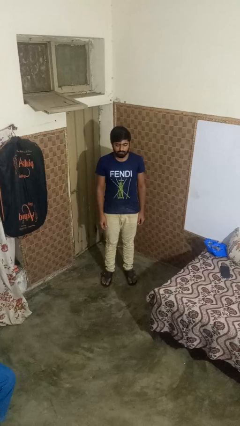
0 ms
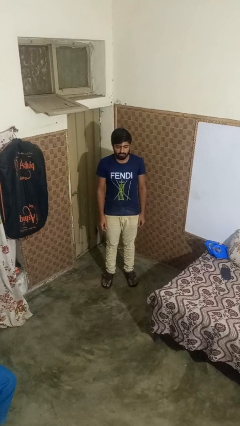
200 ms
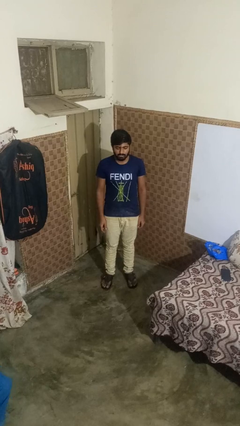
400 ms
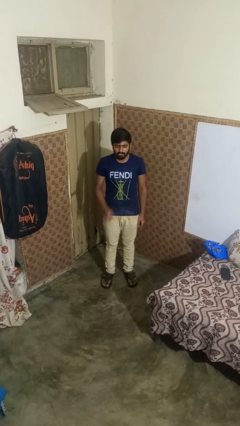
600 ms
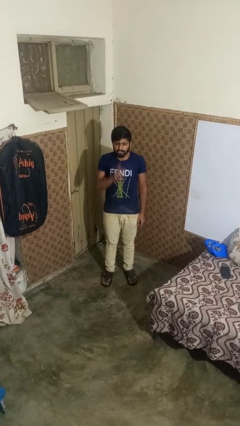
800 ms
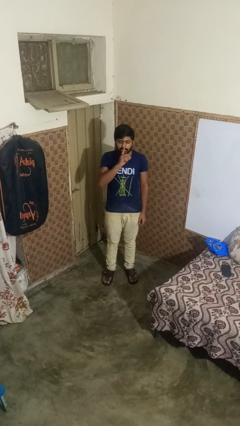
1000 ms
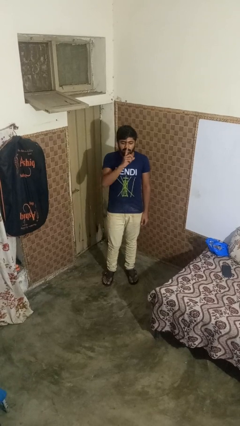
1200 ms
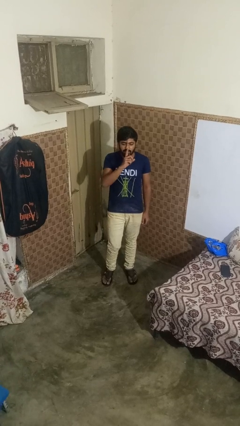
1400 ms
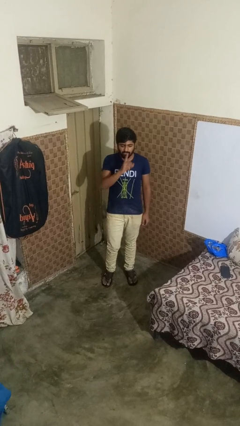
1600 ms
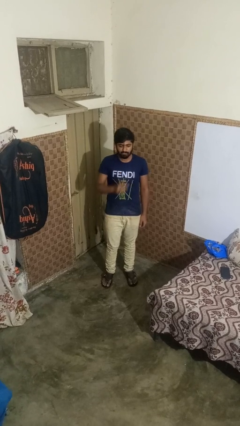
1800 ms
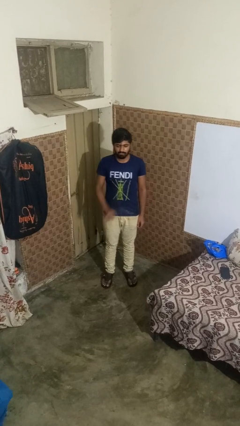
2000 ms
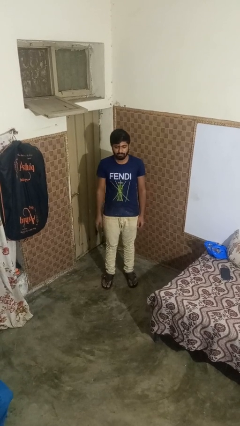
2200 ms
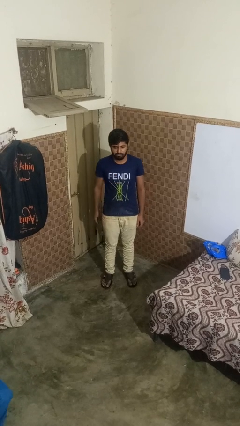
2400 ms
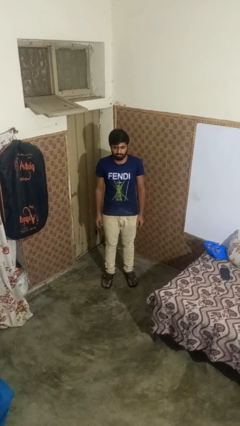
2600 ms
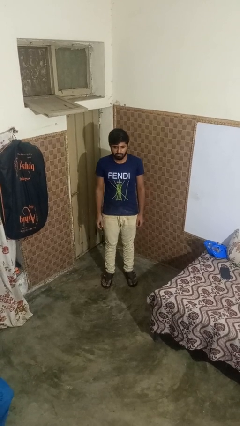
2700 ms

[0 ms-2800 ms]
person gestures be quiet

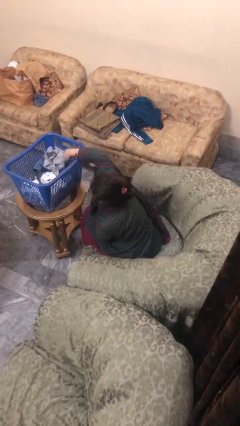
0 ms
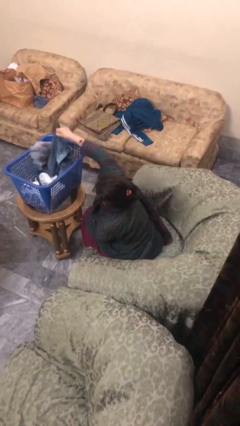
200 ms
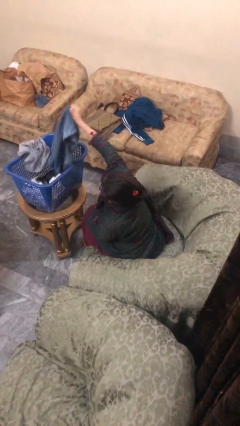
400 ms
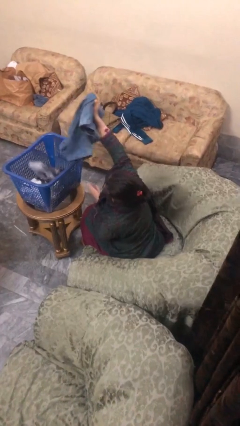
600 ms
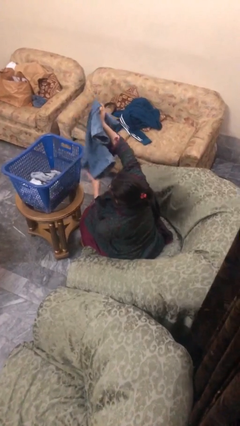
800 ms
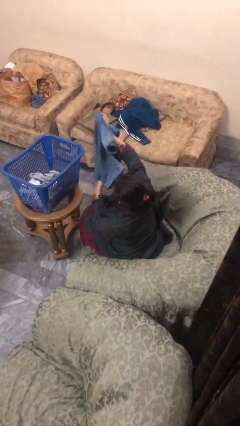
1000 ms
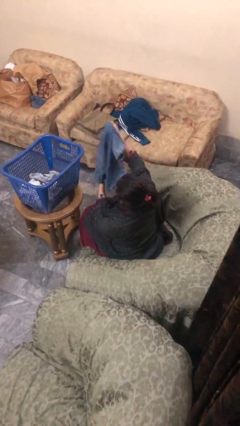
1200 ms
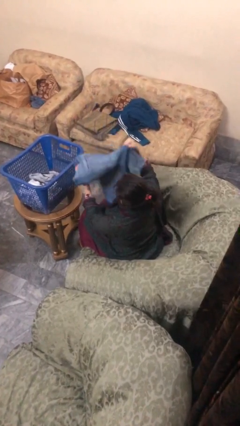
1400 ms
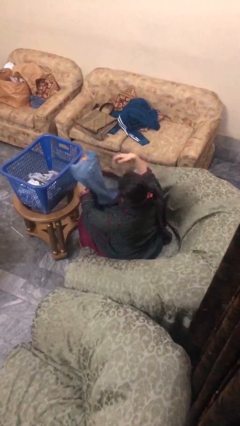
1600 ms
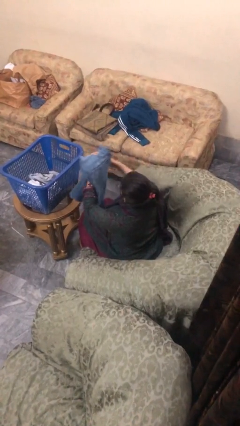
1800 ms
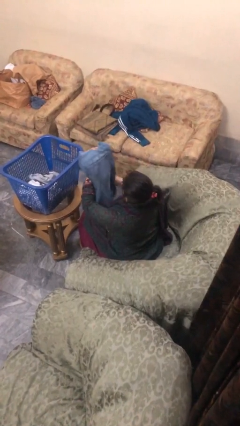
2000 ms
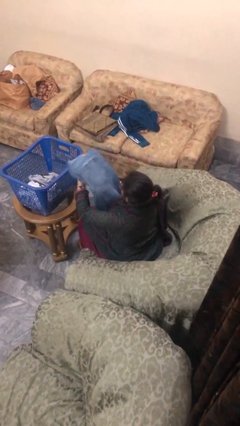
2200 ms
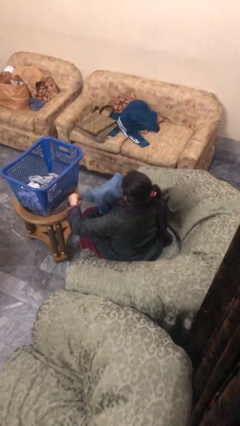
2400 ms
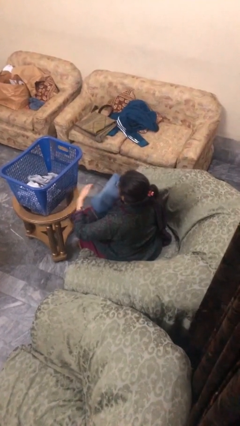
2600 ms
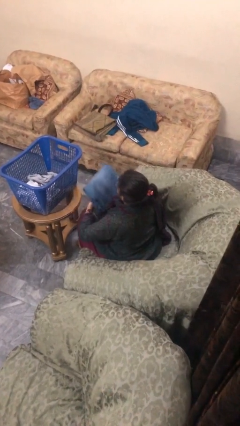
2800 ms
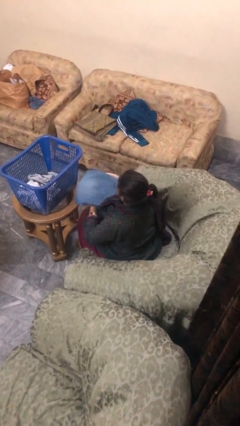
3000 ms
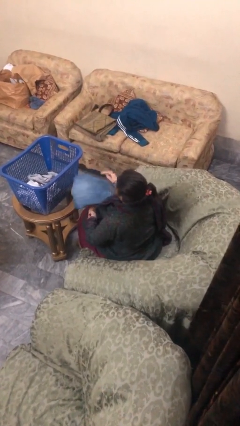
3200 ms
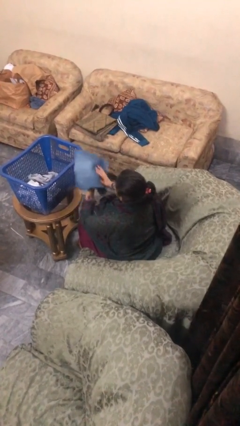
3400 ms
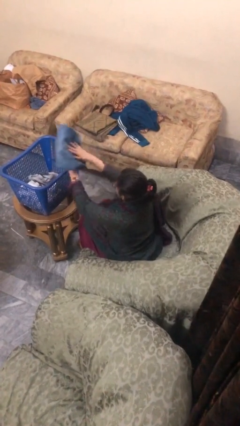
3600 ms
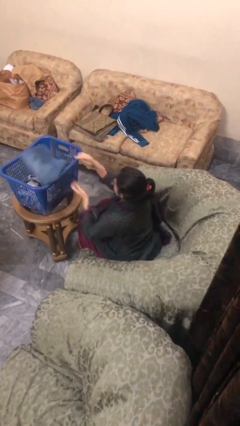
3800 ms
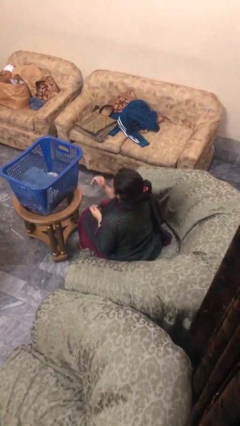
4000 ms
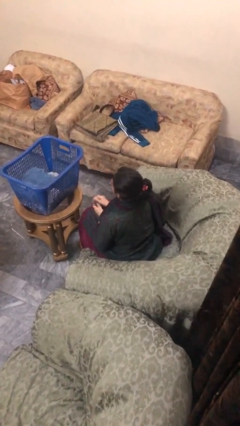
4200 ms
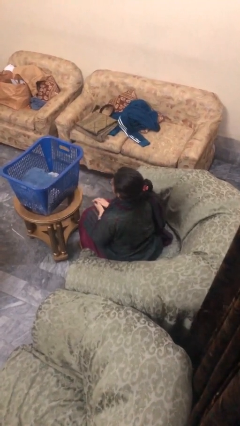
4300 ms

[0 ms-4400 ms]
person folds pants

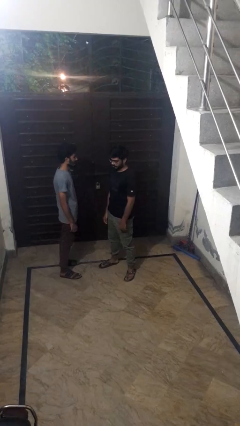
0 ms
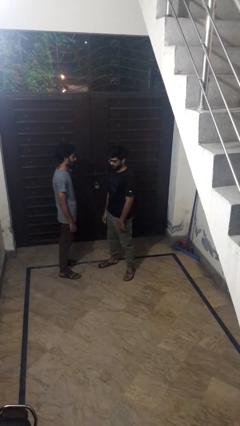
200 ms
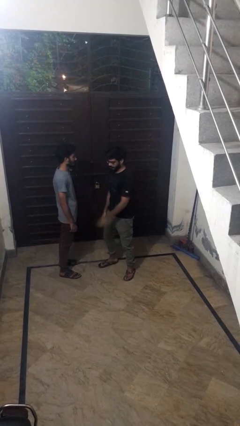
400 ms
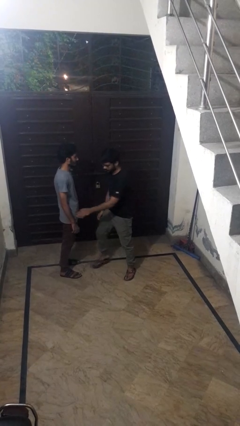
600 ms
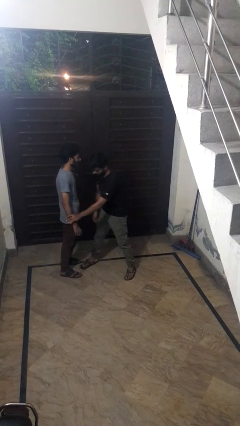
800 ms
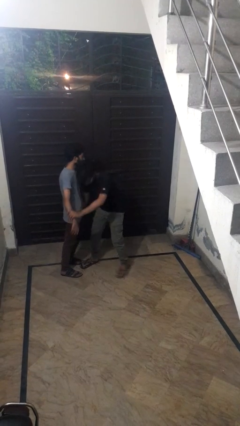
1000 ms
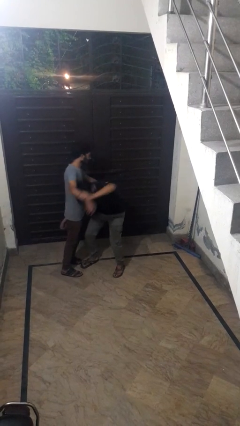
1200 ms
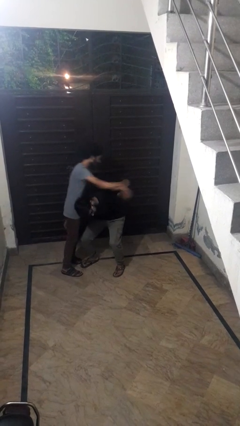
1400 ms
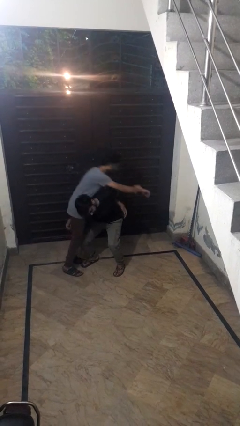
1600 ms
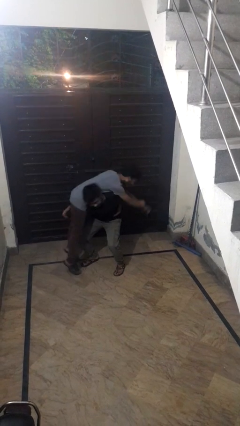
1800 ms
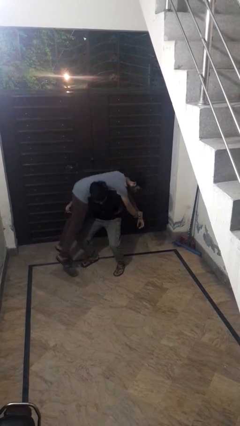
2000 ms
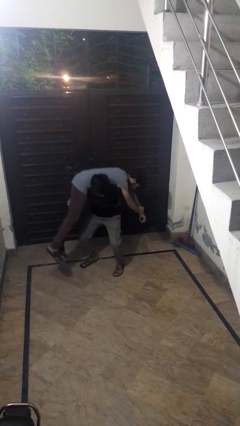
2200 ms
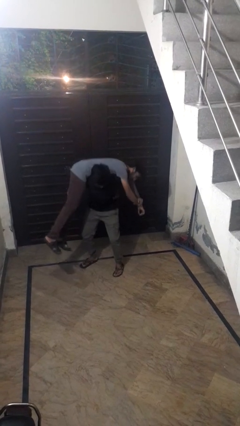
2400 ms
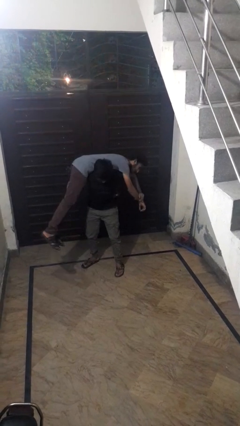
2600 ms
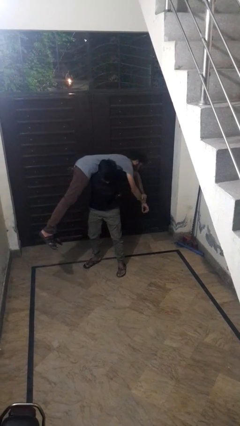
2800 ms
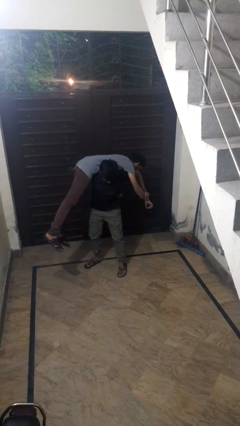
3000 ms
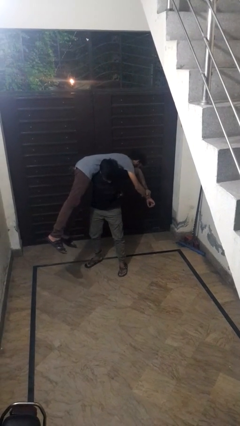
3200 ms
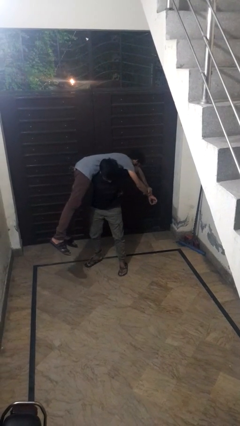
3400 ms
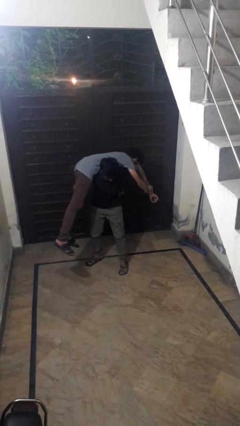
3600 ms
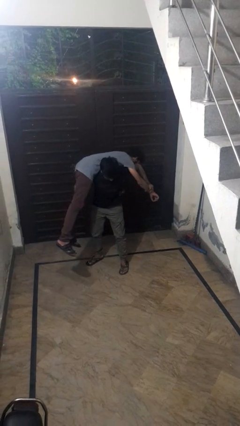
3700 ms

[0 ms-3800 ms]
person carries person over shoulder

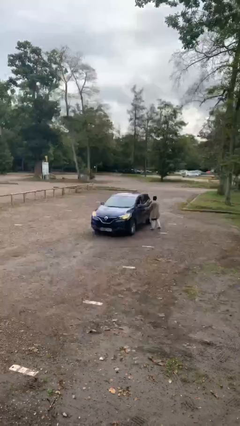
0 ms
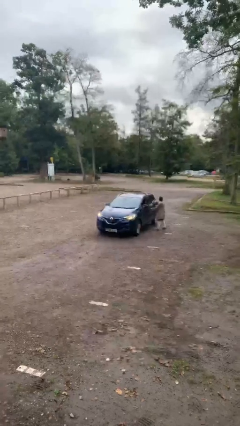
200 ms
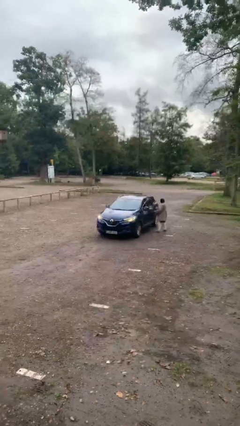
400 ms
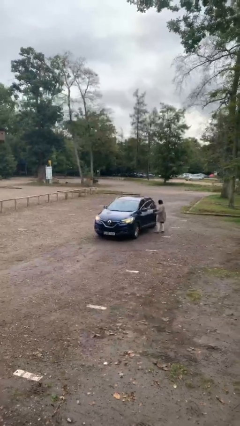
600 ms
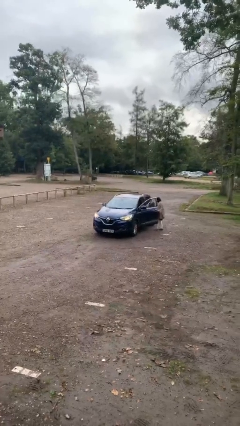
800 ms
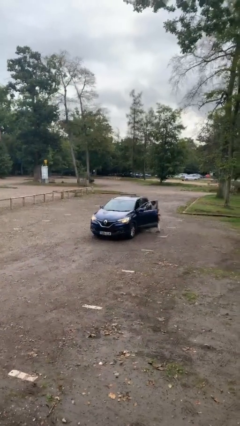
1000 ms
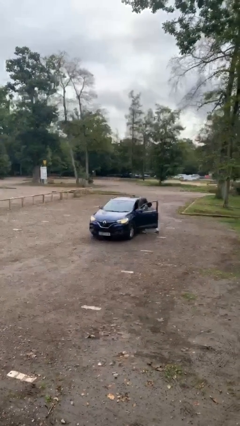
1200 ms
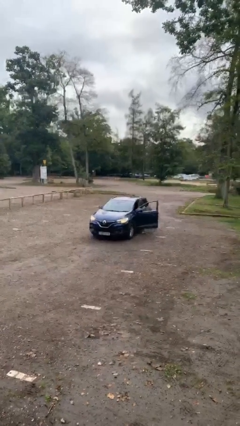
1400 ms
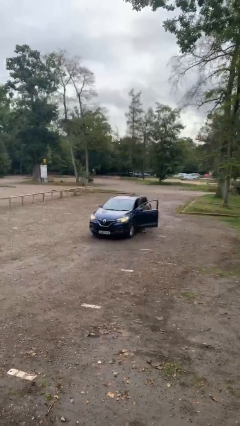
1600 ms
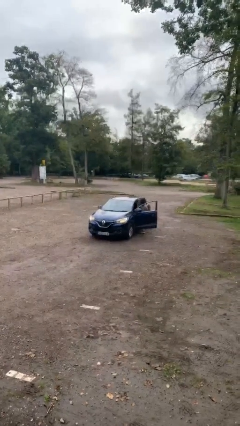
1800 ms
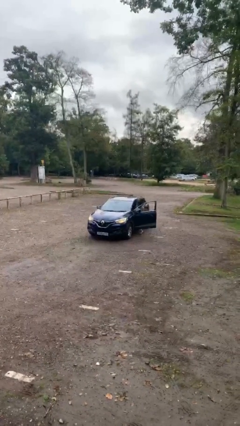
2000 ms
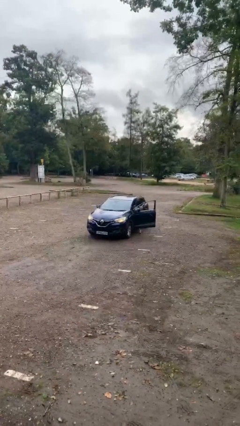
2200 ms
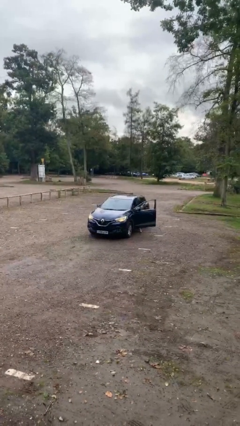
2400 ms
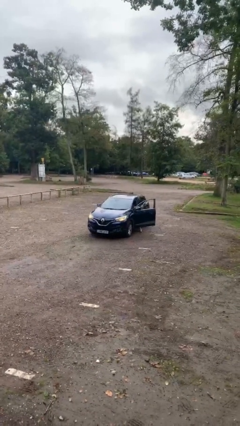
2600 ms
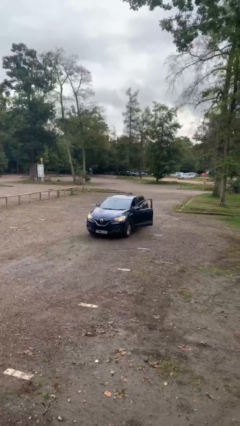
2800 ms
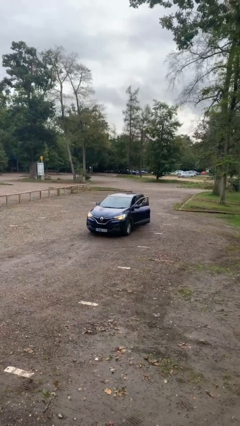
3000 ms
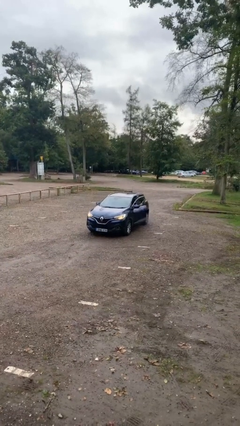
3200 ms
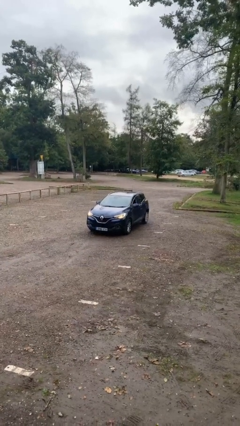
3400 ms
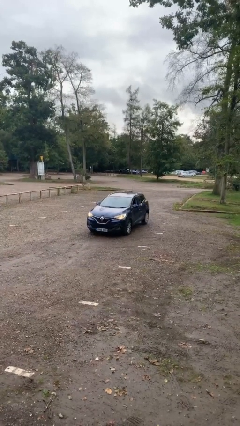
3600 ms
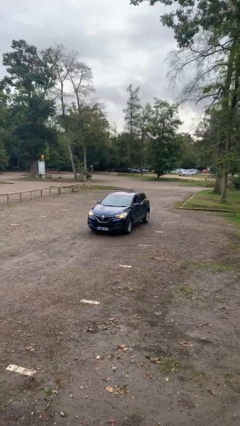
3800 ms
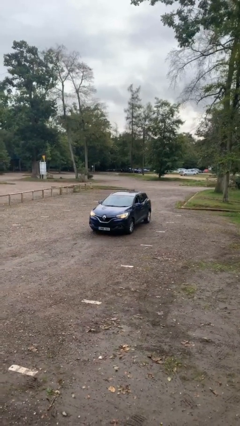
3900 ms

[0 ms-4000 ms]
car picks up person

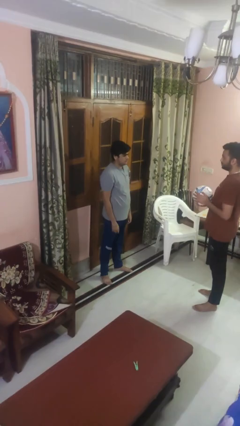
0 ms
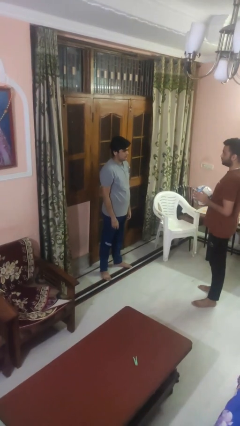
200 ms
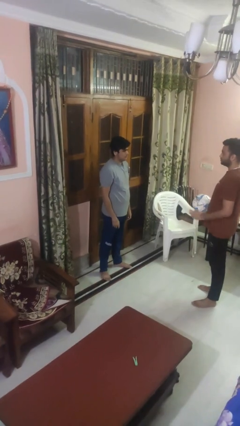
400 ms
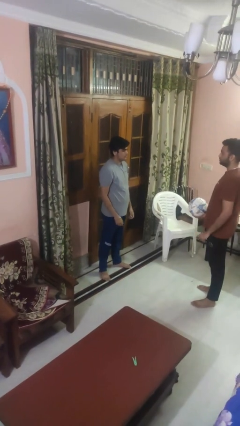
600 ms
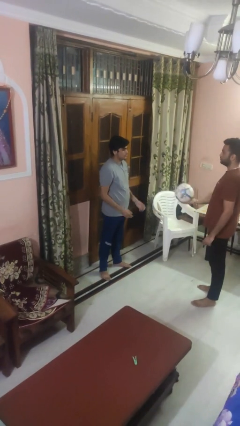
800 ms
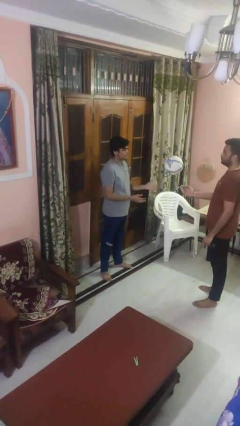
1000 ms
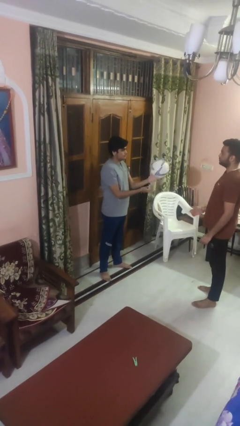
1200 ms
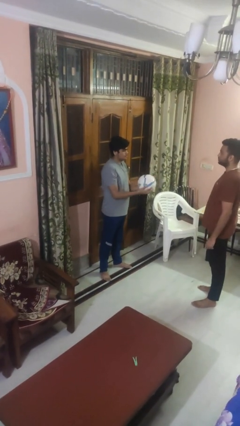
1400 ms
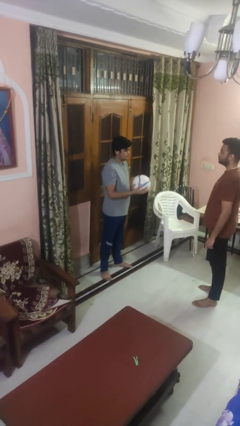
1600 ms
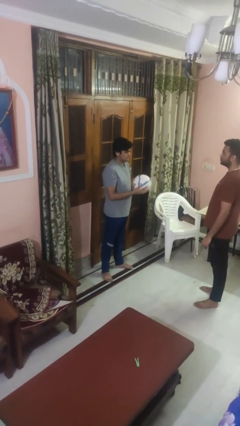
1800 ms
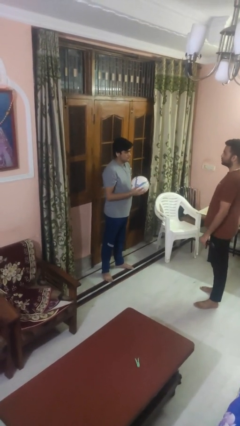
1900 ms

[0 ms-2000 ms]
person catches object from person

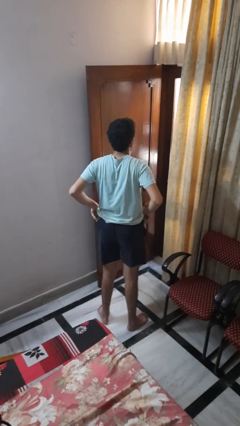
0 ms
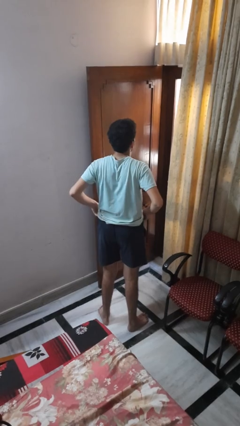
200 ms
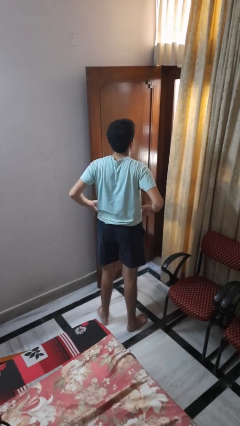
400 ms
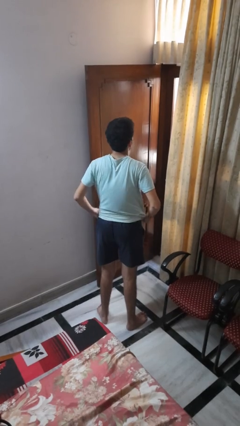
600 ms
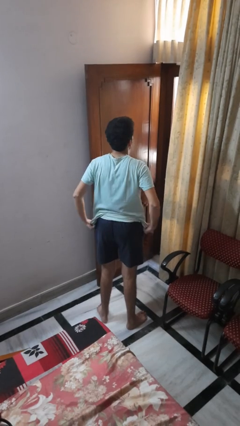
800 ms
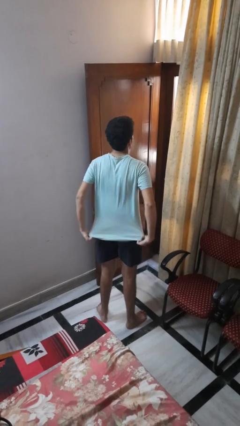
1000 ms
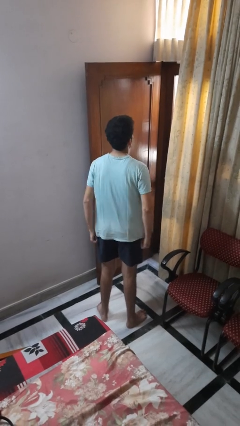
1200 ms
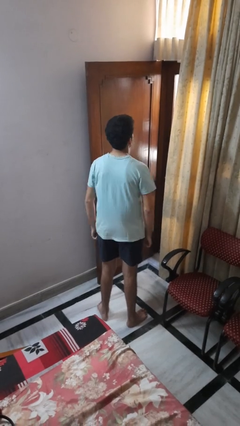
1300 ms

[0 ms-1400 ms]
person hikes up pants
